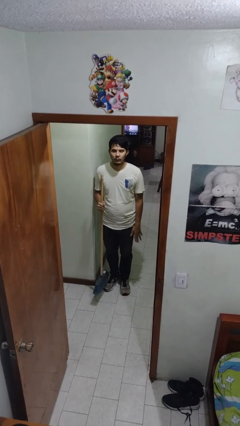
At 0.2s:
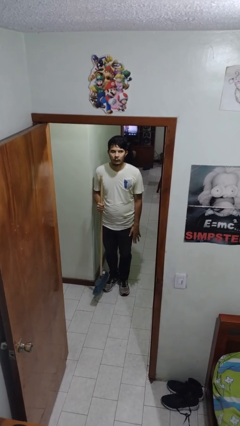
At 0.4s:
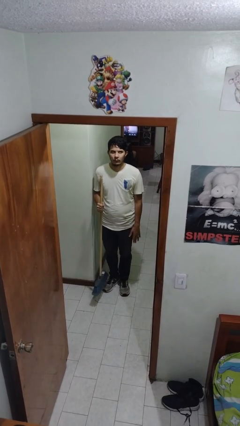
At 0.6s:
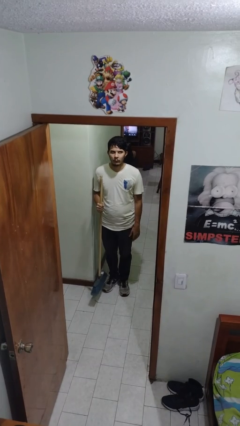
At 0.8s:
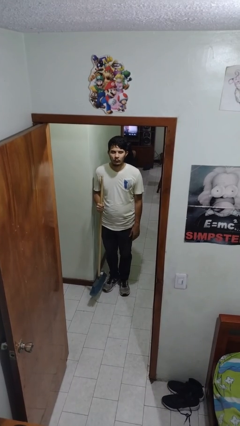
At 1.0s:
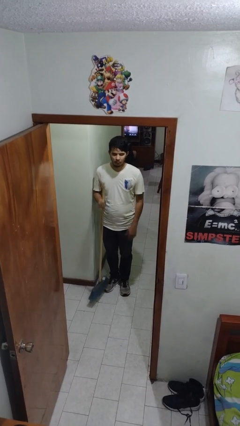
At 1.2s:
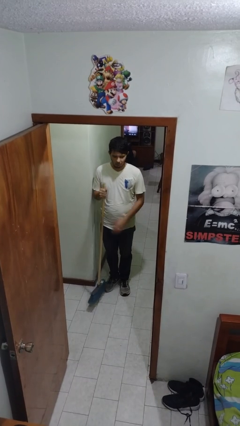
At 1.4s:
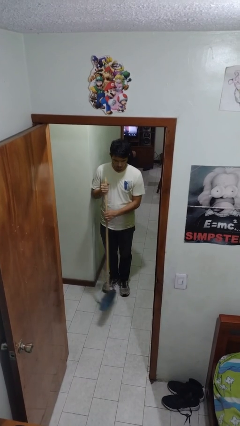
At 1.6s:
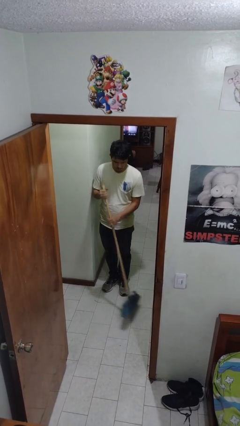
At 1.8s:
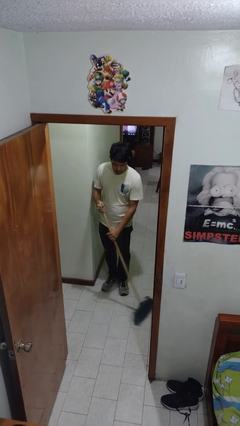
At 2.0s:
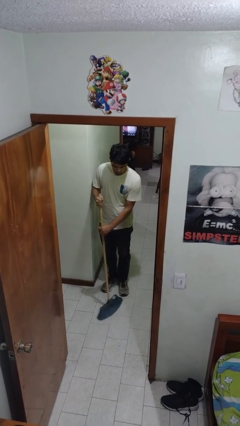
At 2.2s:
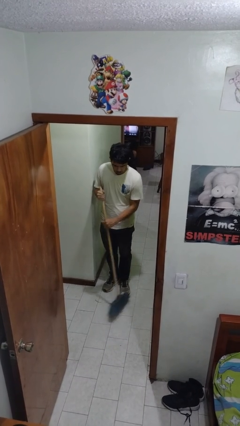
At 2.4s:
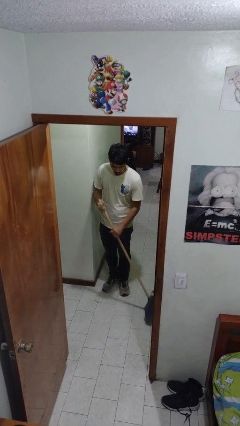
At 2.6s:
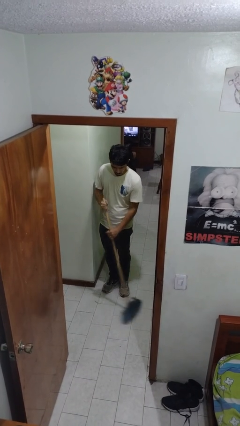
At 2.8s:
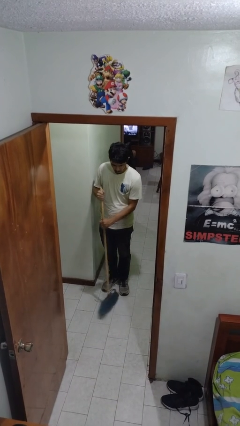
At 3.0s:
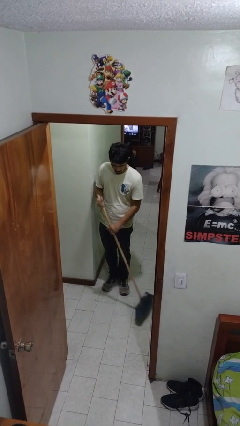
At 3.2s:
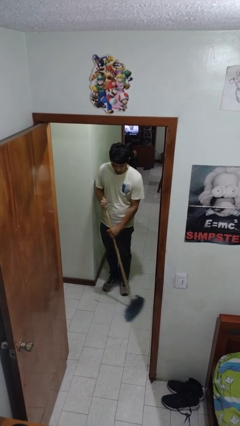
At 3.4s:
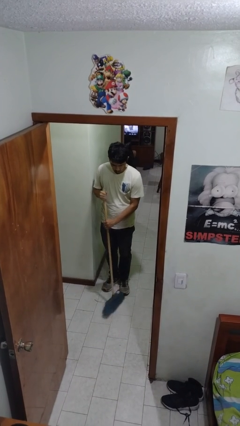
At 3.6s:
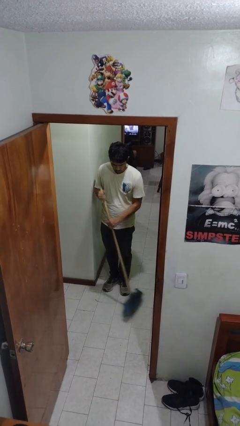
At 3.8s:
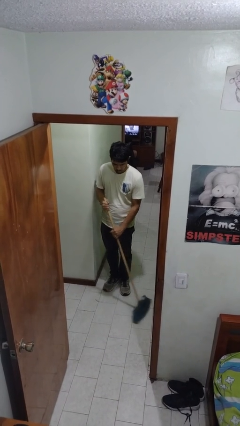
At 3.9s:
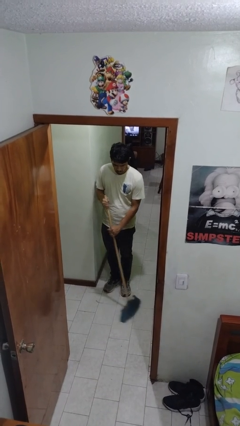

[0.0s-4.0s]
person sweeps floor

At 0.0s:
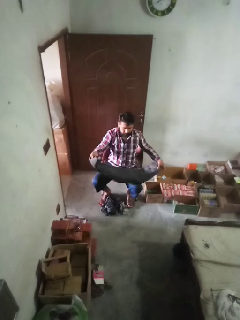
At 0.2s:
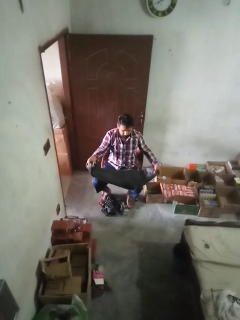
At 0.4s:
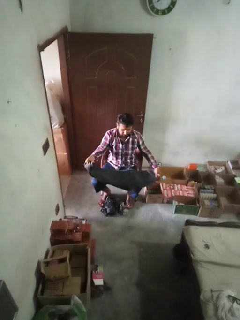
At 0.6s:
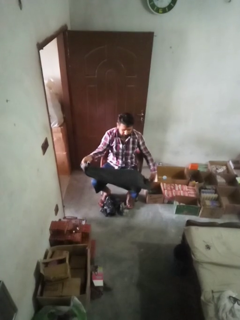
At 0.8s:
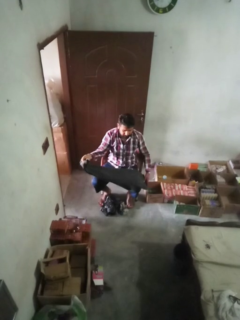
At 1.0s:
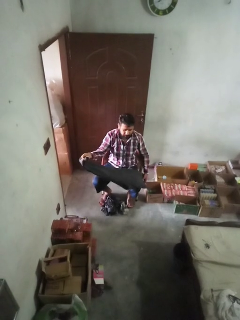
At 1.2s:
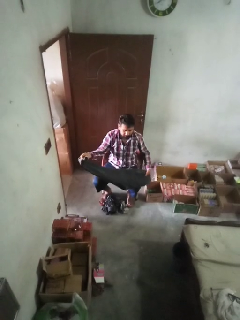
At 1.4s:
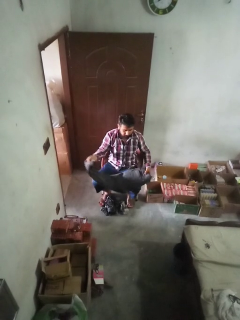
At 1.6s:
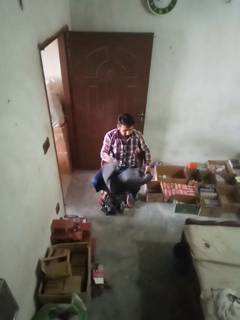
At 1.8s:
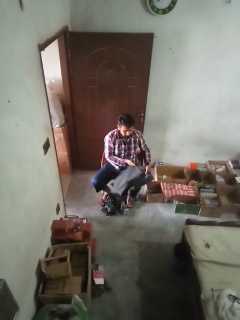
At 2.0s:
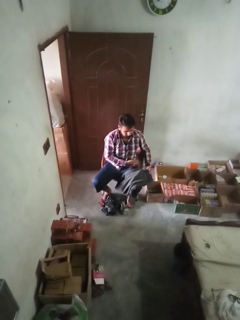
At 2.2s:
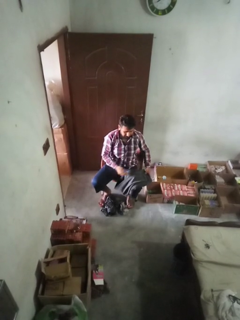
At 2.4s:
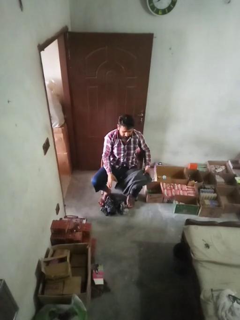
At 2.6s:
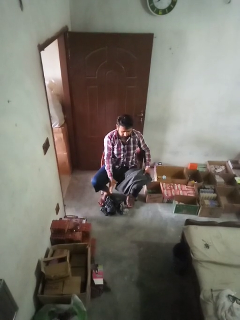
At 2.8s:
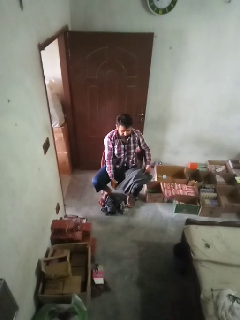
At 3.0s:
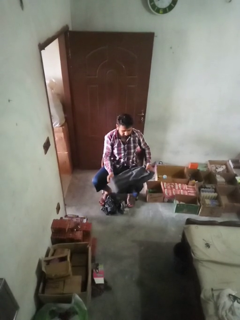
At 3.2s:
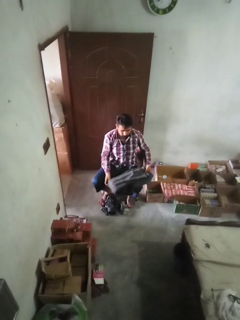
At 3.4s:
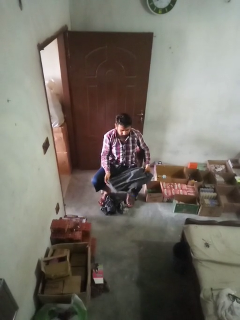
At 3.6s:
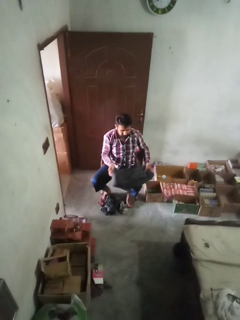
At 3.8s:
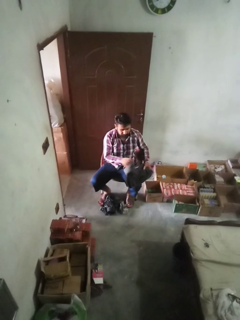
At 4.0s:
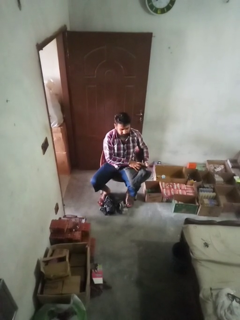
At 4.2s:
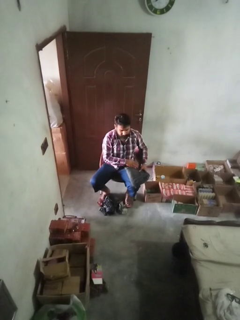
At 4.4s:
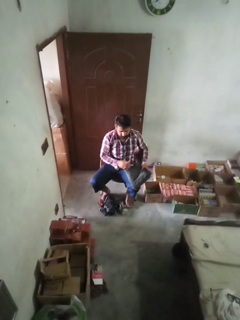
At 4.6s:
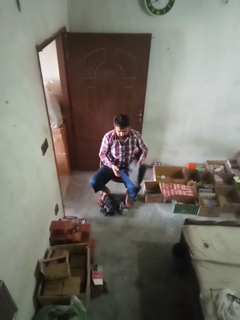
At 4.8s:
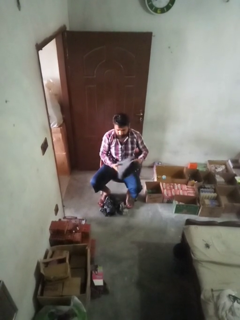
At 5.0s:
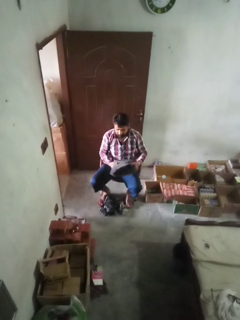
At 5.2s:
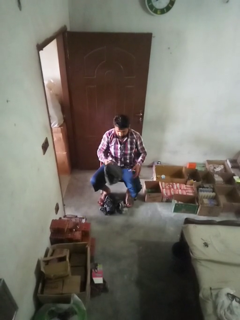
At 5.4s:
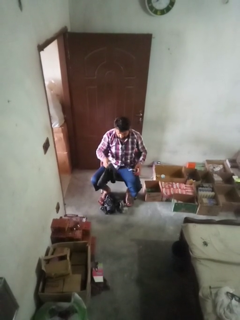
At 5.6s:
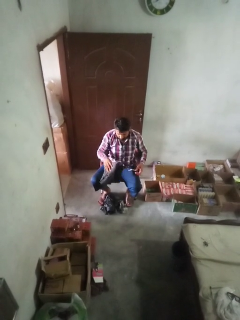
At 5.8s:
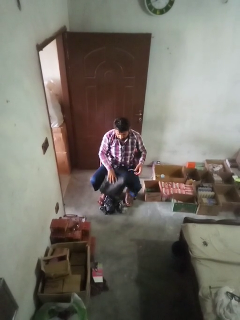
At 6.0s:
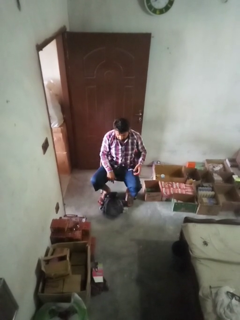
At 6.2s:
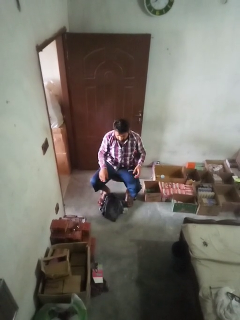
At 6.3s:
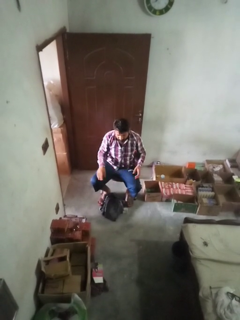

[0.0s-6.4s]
person folds pants

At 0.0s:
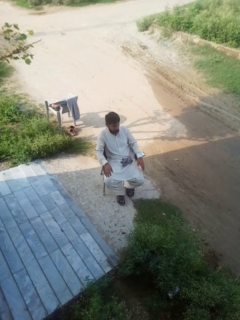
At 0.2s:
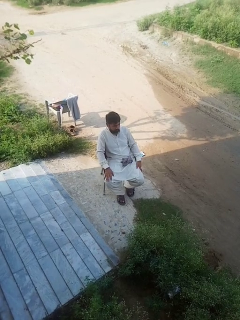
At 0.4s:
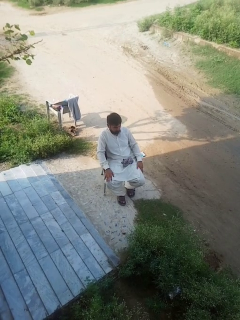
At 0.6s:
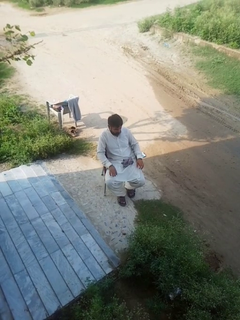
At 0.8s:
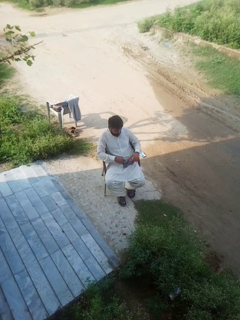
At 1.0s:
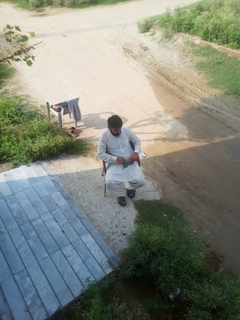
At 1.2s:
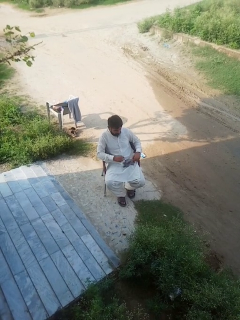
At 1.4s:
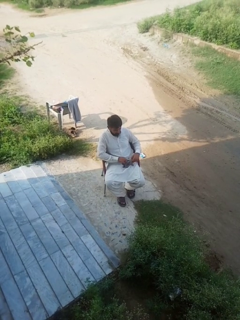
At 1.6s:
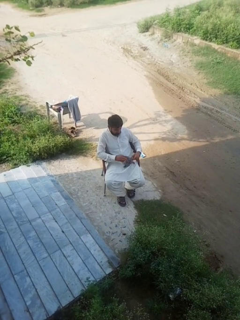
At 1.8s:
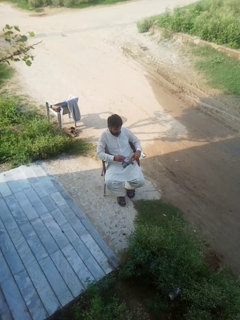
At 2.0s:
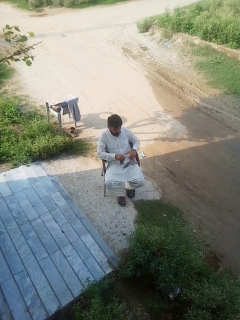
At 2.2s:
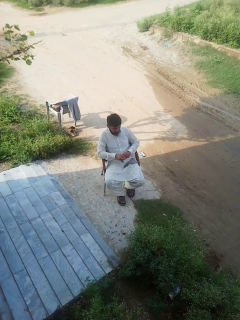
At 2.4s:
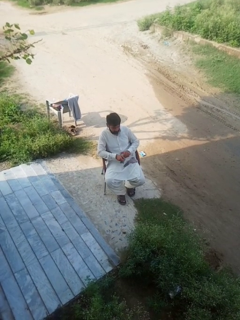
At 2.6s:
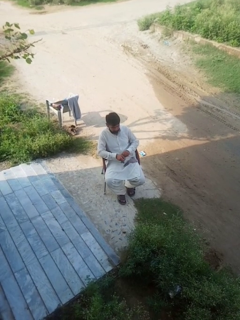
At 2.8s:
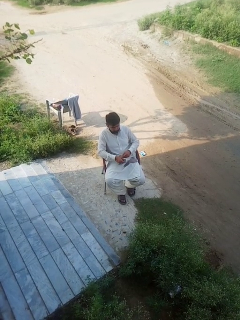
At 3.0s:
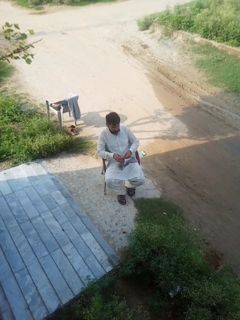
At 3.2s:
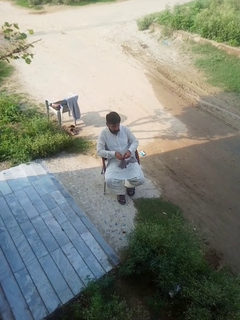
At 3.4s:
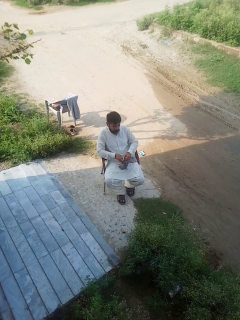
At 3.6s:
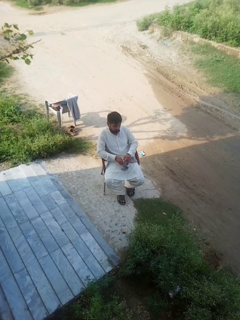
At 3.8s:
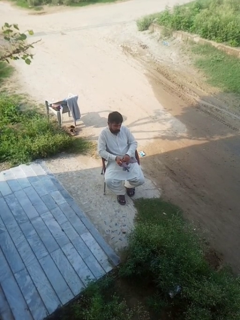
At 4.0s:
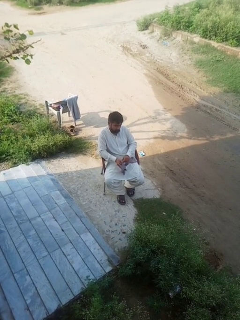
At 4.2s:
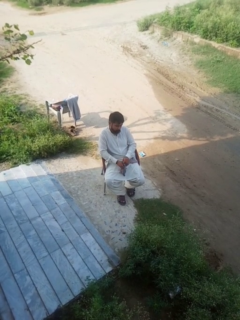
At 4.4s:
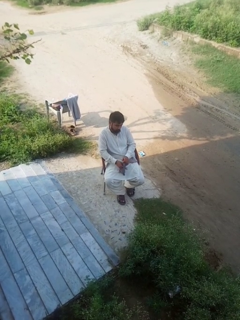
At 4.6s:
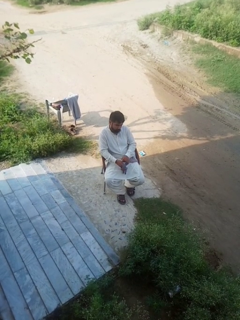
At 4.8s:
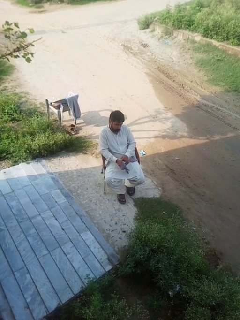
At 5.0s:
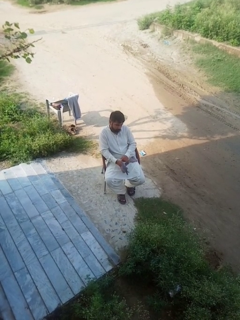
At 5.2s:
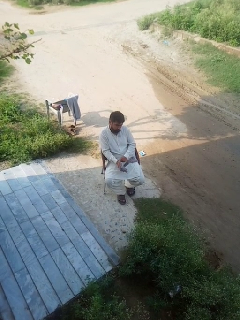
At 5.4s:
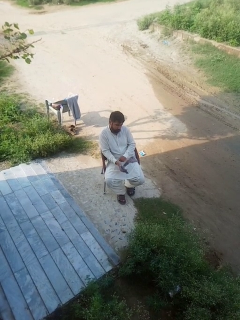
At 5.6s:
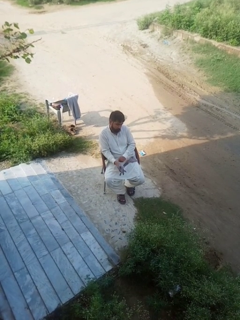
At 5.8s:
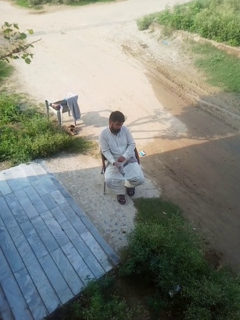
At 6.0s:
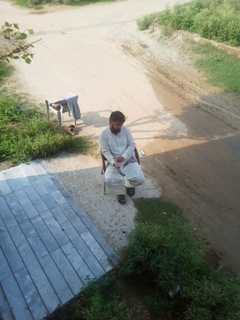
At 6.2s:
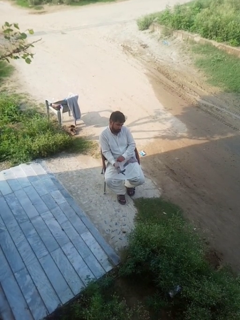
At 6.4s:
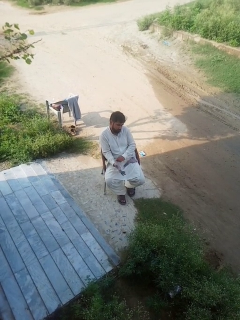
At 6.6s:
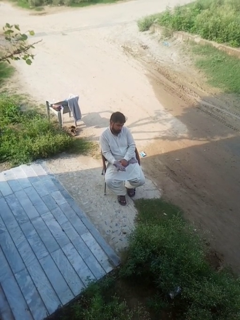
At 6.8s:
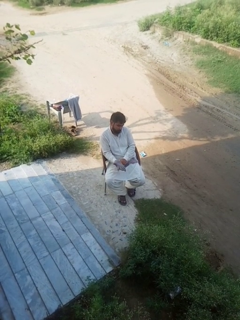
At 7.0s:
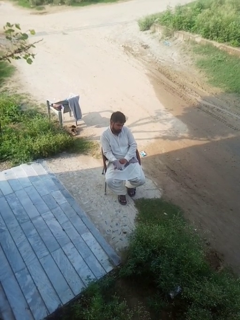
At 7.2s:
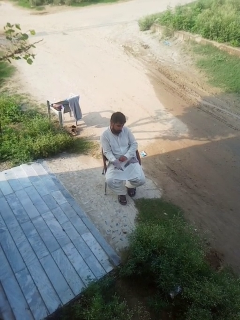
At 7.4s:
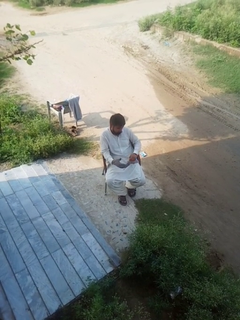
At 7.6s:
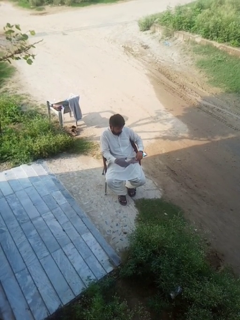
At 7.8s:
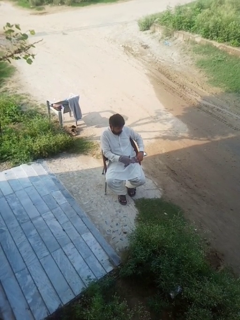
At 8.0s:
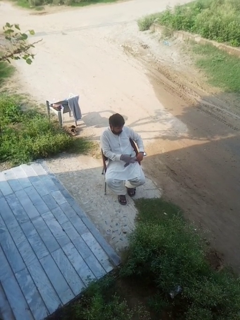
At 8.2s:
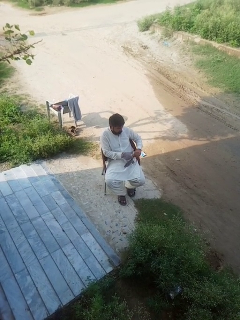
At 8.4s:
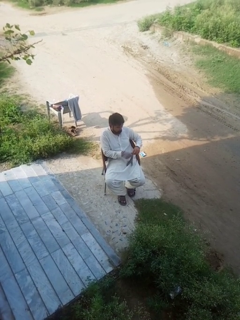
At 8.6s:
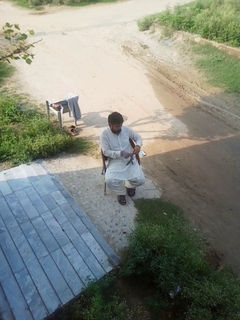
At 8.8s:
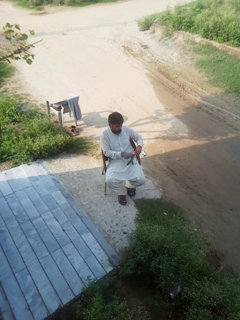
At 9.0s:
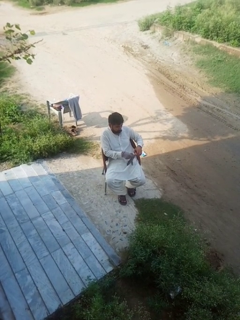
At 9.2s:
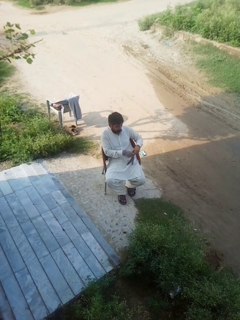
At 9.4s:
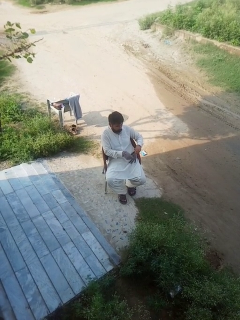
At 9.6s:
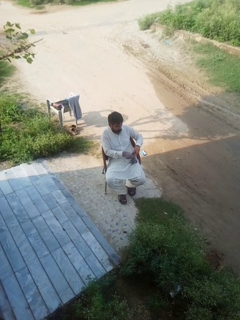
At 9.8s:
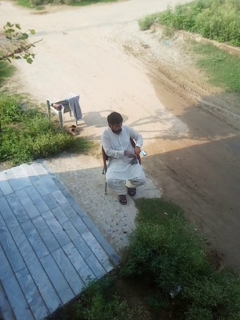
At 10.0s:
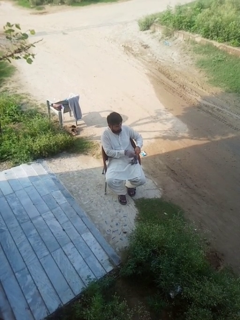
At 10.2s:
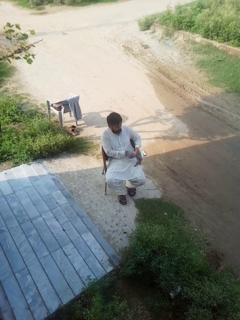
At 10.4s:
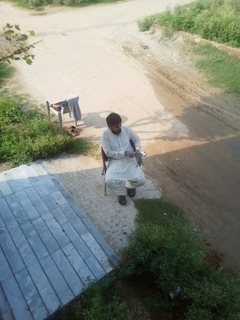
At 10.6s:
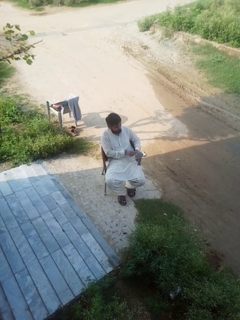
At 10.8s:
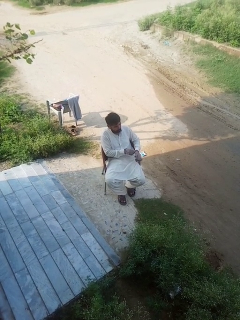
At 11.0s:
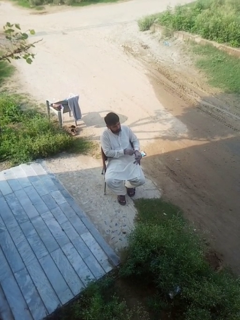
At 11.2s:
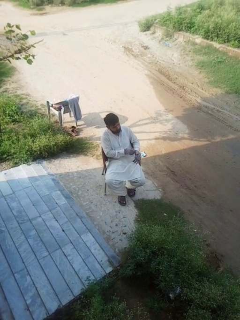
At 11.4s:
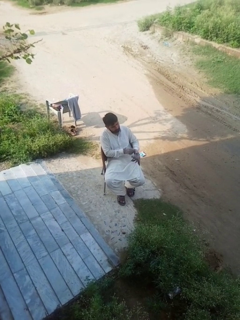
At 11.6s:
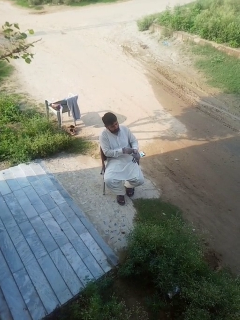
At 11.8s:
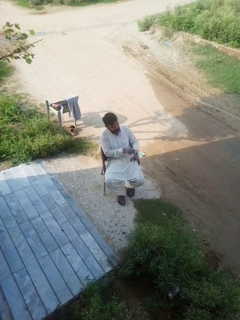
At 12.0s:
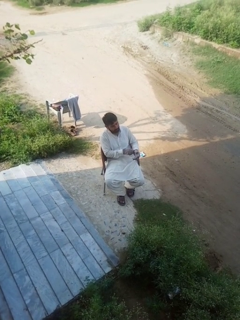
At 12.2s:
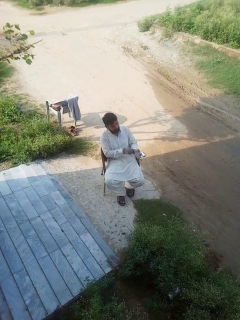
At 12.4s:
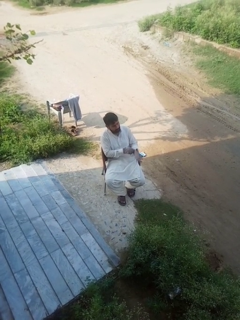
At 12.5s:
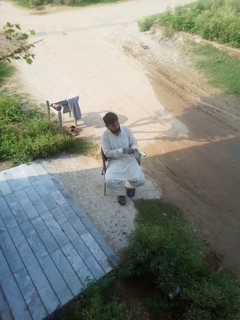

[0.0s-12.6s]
person puts on gloves
